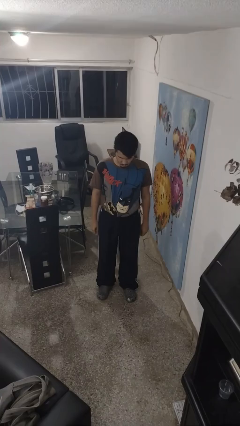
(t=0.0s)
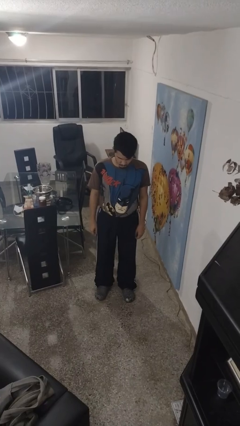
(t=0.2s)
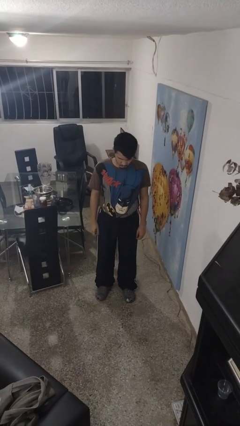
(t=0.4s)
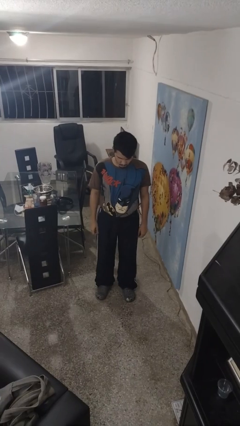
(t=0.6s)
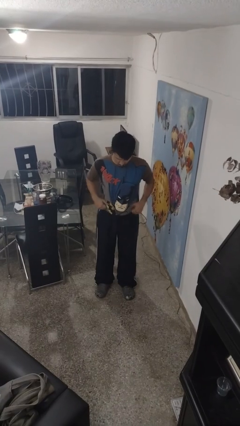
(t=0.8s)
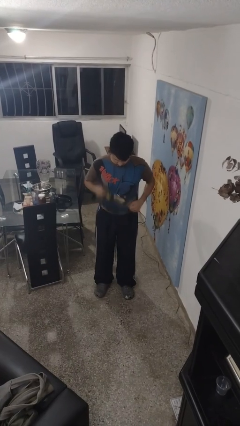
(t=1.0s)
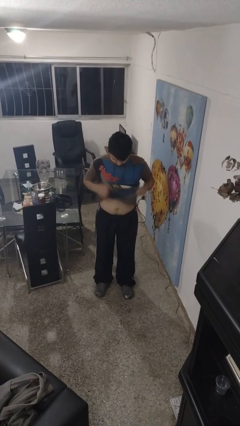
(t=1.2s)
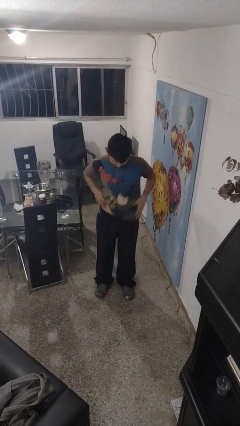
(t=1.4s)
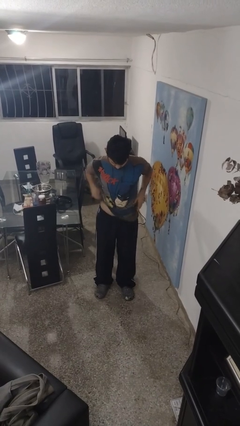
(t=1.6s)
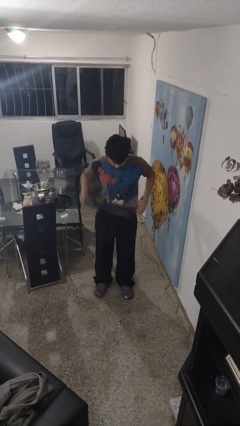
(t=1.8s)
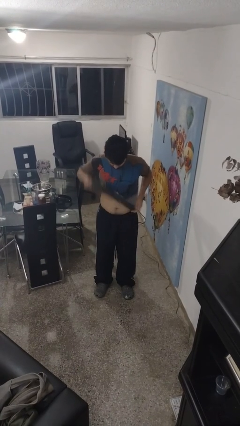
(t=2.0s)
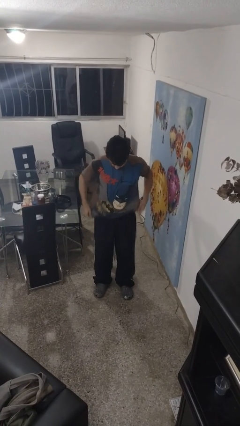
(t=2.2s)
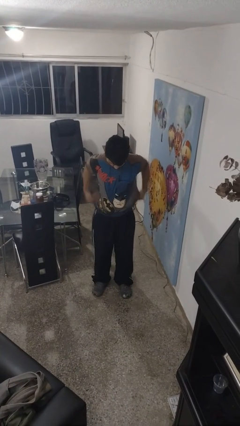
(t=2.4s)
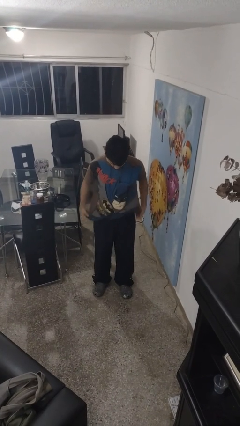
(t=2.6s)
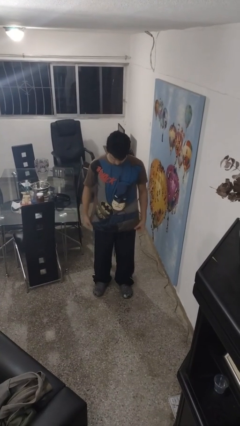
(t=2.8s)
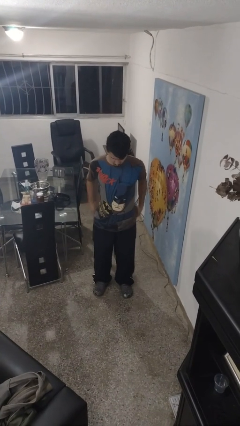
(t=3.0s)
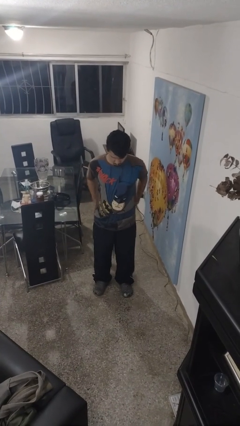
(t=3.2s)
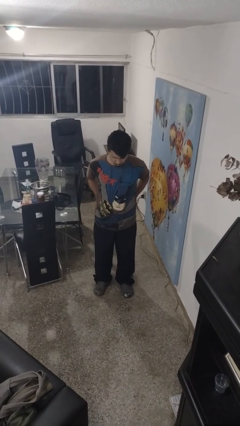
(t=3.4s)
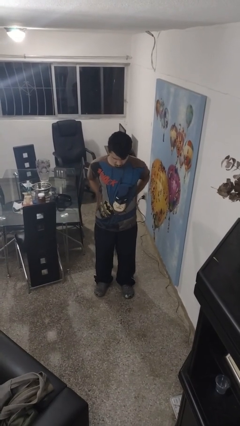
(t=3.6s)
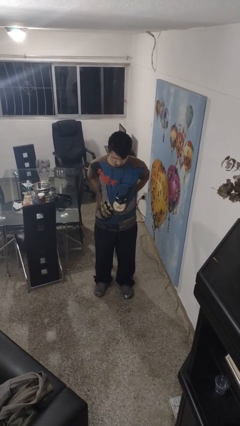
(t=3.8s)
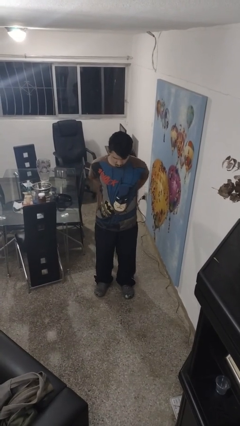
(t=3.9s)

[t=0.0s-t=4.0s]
person untucks shirt

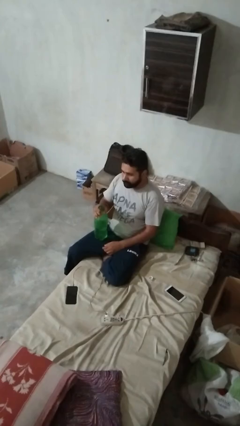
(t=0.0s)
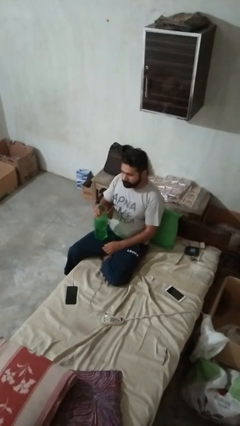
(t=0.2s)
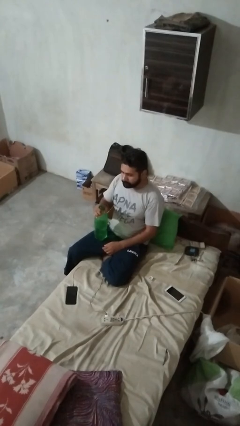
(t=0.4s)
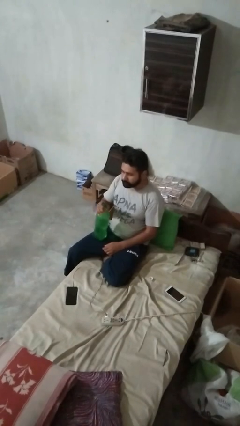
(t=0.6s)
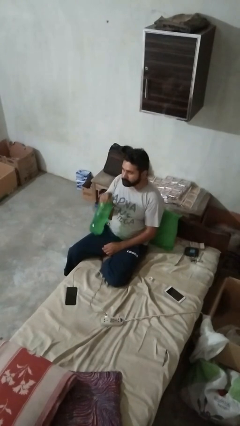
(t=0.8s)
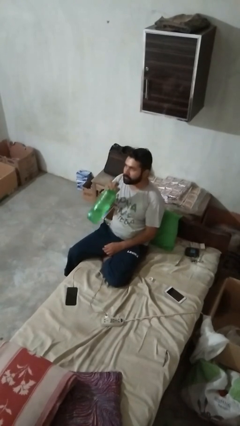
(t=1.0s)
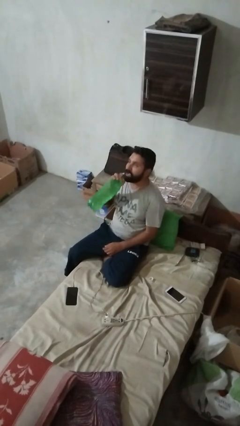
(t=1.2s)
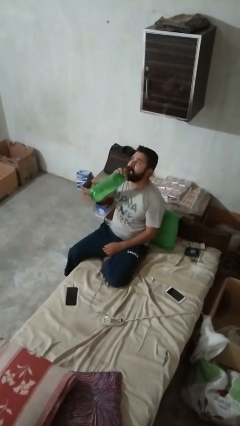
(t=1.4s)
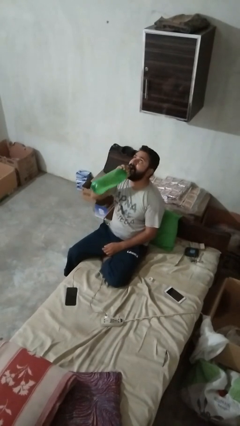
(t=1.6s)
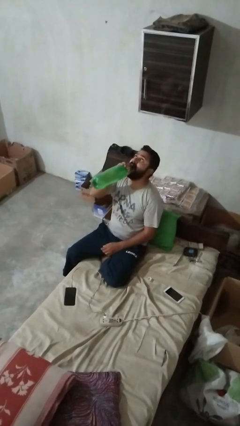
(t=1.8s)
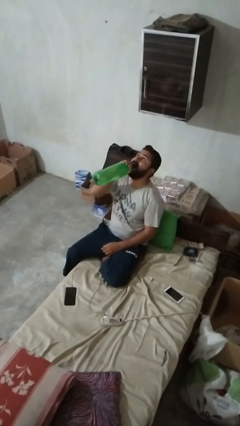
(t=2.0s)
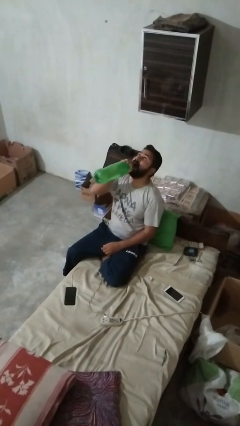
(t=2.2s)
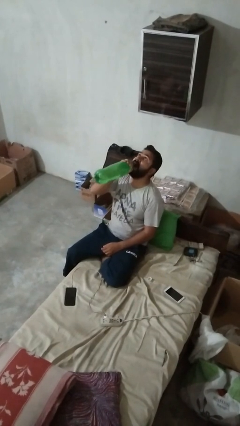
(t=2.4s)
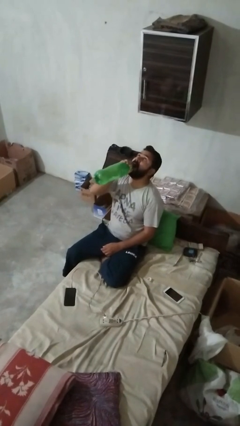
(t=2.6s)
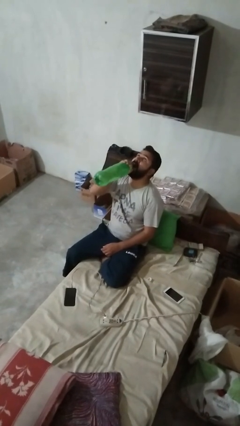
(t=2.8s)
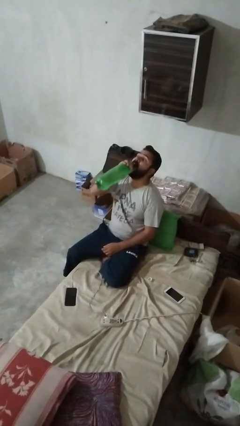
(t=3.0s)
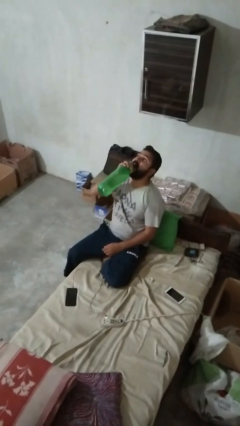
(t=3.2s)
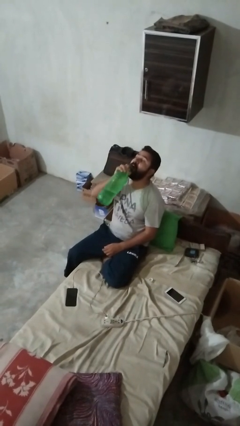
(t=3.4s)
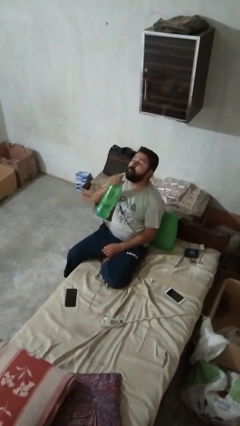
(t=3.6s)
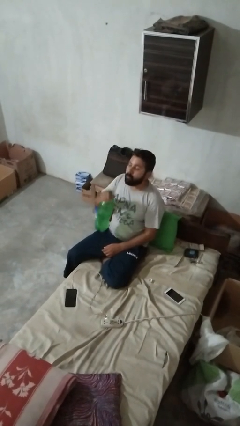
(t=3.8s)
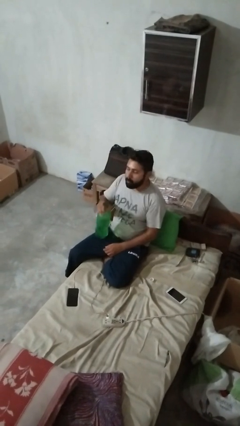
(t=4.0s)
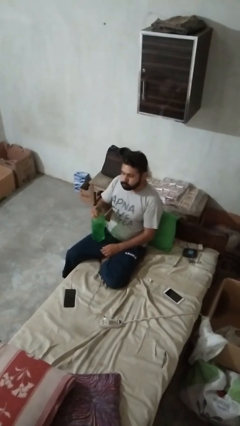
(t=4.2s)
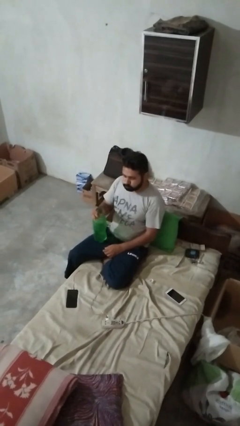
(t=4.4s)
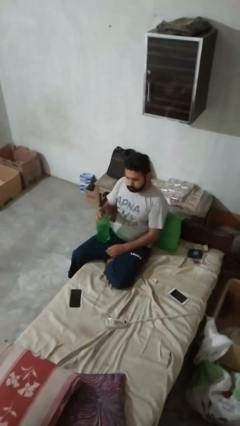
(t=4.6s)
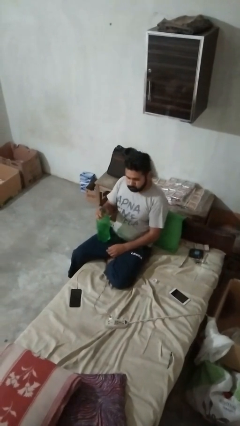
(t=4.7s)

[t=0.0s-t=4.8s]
person drinks from bottle

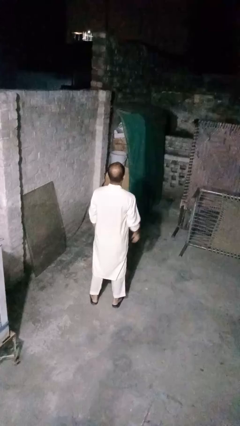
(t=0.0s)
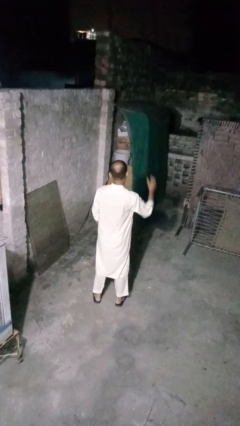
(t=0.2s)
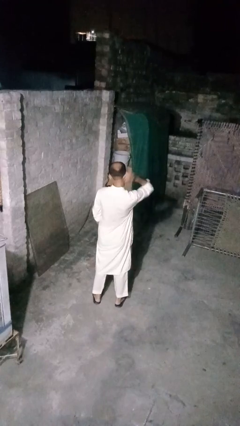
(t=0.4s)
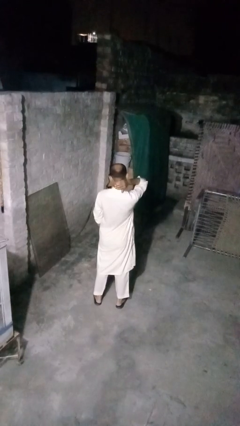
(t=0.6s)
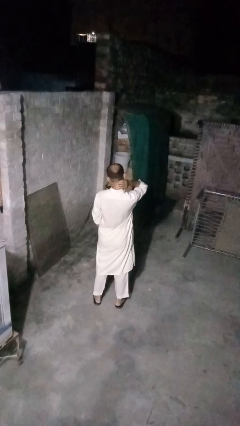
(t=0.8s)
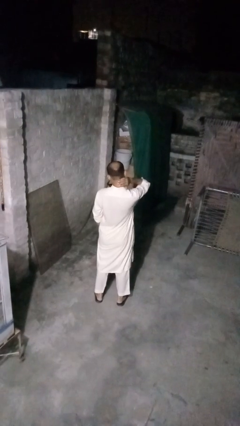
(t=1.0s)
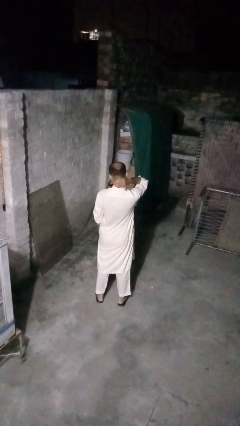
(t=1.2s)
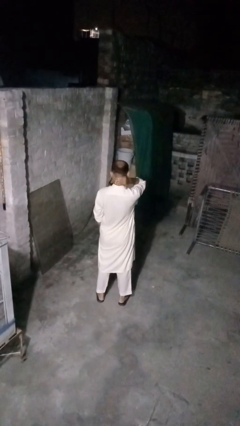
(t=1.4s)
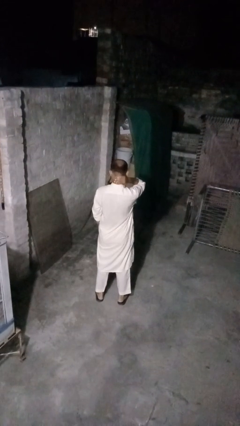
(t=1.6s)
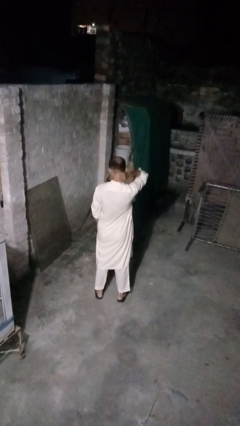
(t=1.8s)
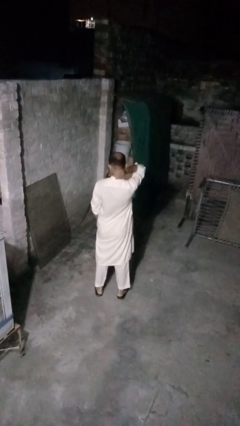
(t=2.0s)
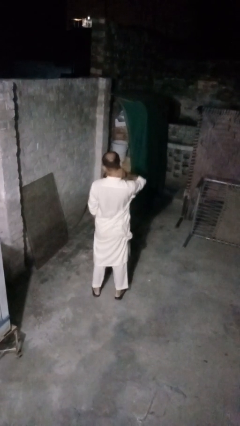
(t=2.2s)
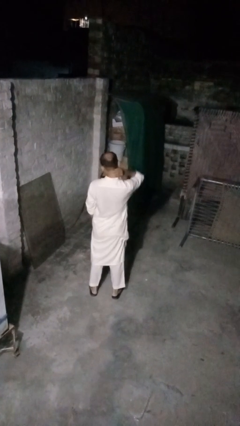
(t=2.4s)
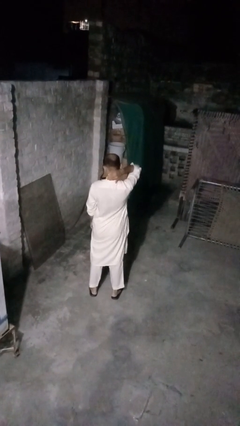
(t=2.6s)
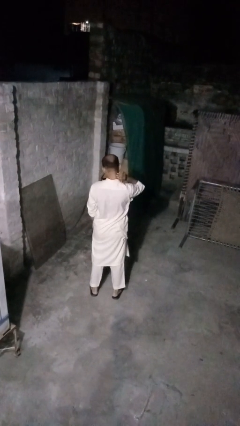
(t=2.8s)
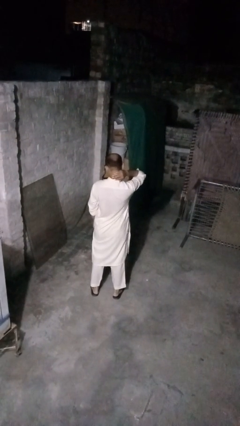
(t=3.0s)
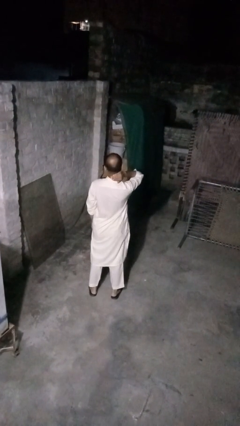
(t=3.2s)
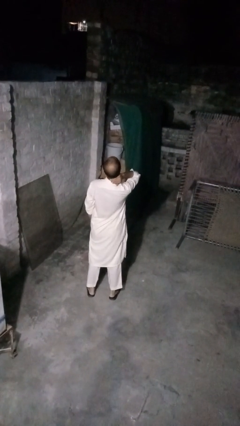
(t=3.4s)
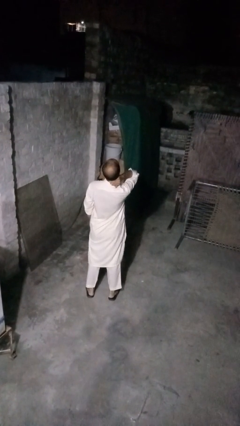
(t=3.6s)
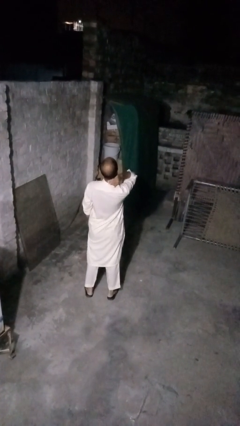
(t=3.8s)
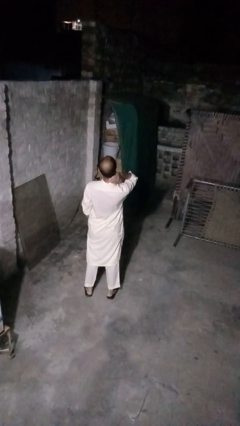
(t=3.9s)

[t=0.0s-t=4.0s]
person rubs neck

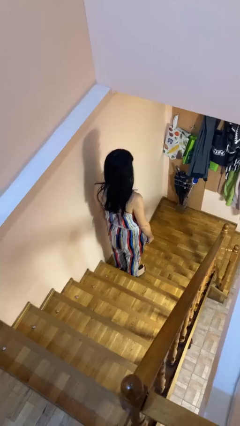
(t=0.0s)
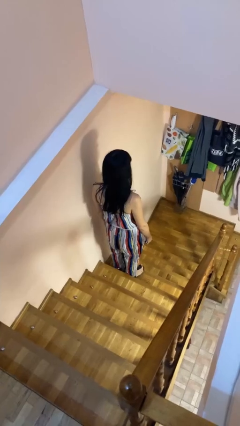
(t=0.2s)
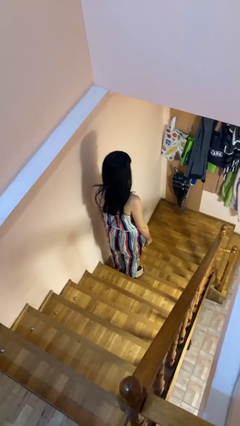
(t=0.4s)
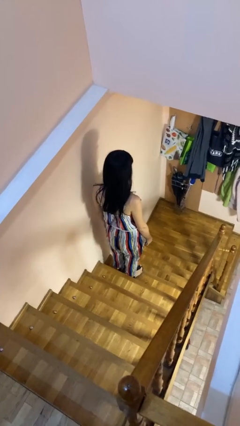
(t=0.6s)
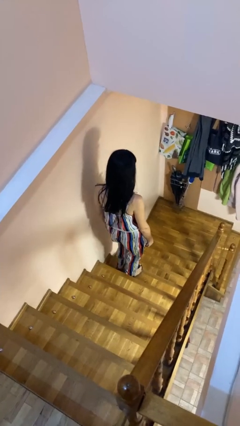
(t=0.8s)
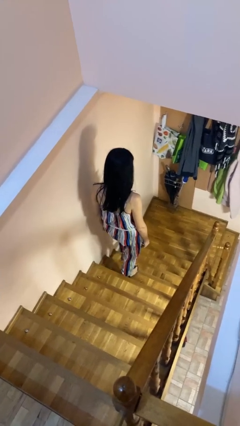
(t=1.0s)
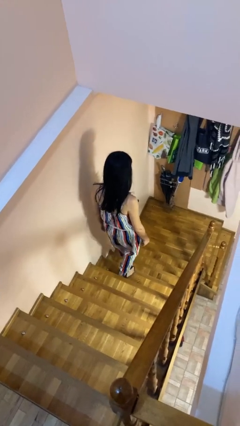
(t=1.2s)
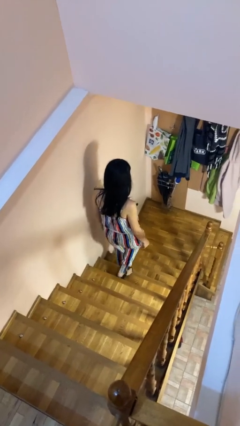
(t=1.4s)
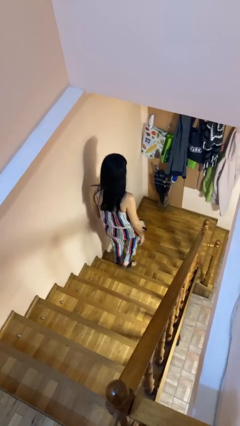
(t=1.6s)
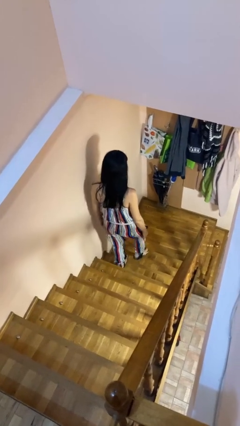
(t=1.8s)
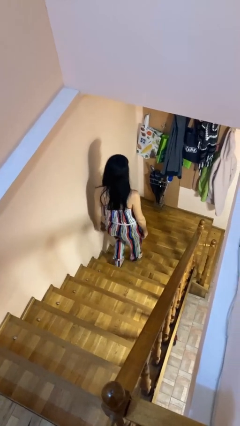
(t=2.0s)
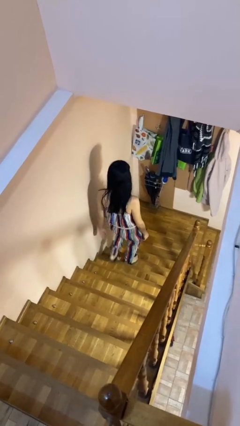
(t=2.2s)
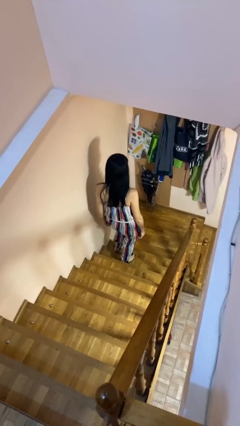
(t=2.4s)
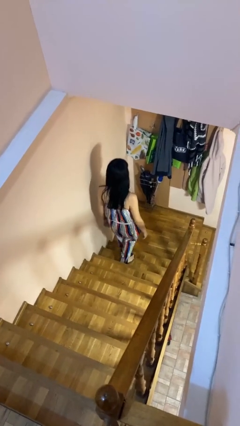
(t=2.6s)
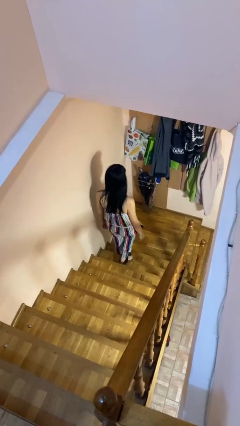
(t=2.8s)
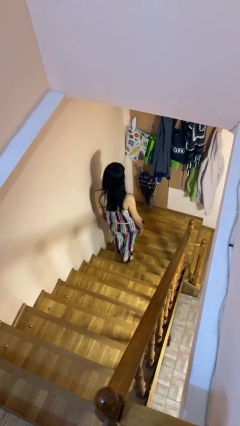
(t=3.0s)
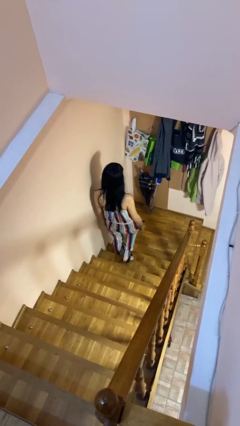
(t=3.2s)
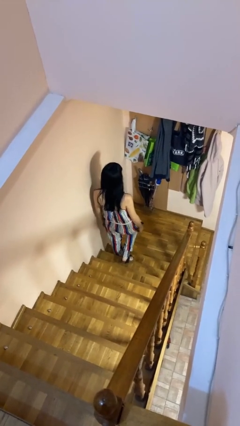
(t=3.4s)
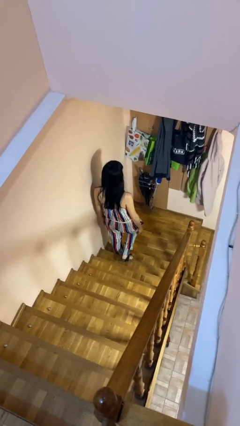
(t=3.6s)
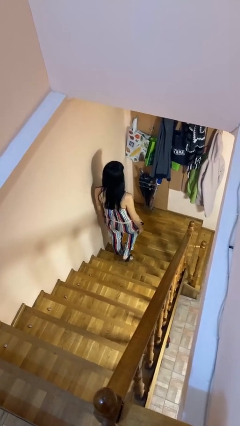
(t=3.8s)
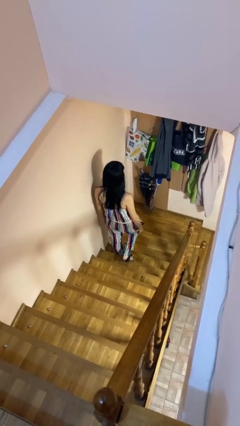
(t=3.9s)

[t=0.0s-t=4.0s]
person climbs down stairs

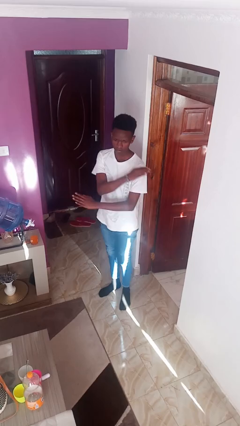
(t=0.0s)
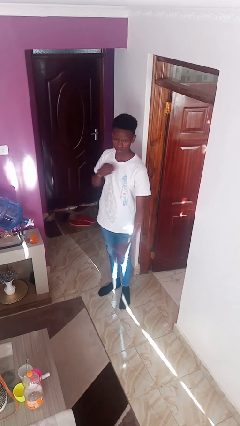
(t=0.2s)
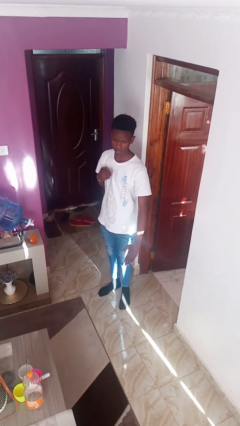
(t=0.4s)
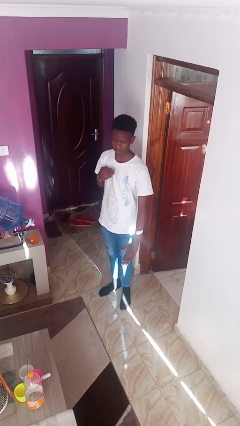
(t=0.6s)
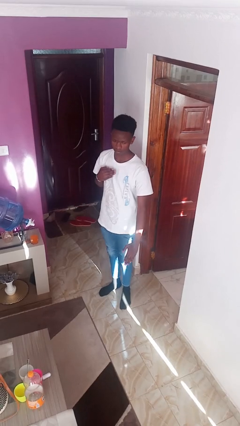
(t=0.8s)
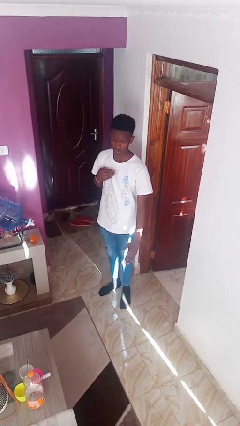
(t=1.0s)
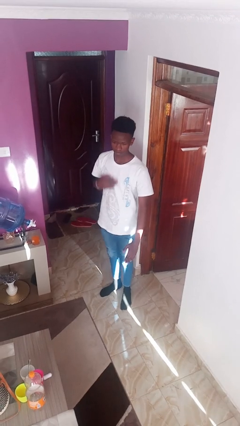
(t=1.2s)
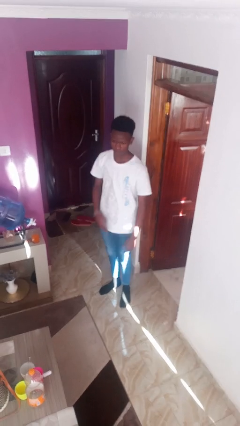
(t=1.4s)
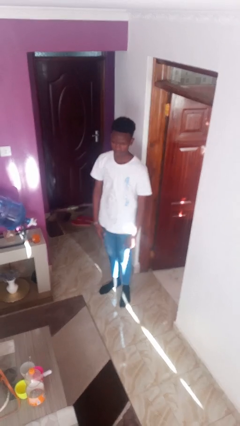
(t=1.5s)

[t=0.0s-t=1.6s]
person karate chop
